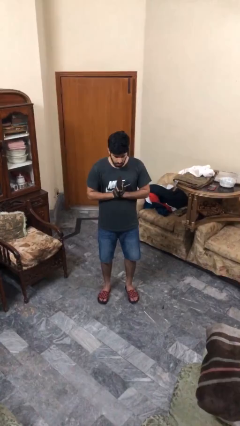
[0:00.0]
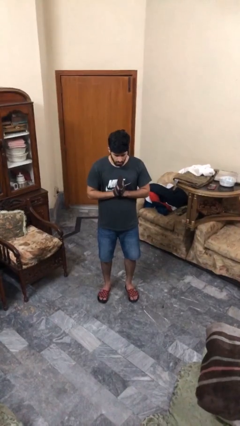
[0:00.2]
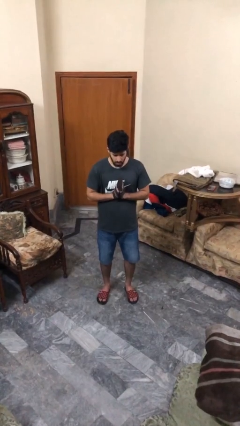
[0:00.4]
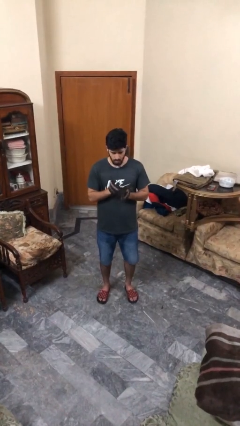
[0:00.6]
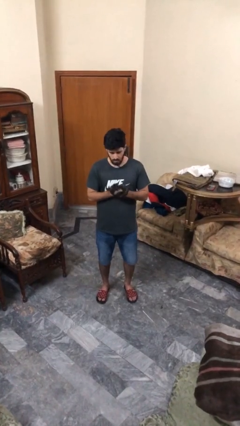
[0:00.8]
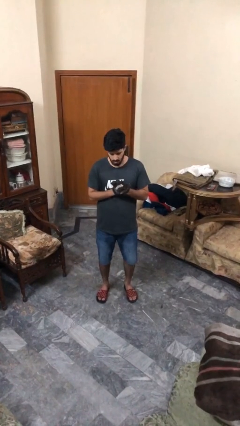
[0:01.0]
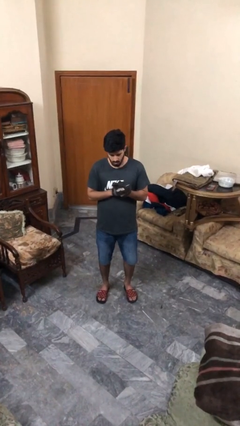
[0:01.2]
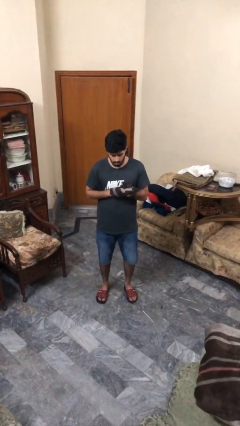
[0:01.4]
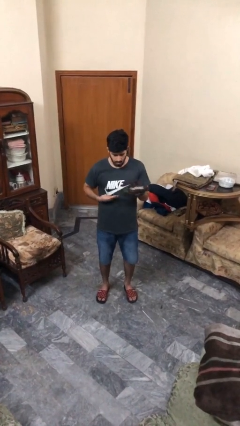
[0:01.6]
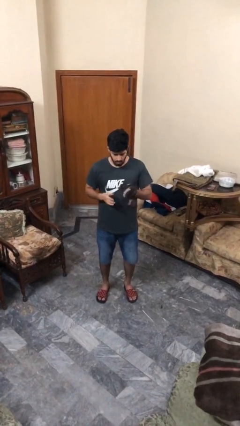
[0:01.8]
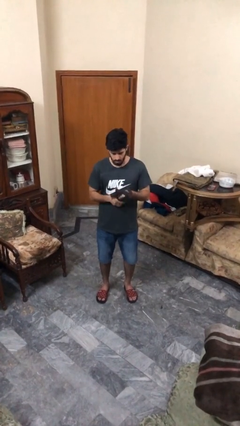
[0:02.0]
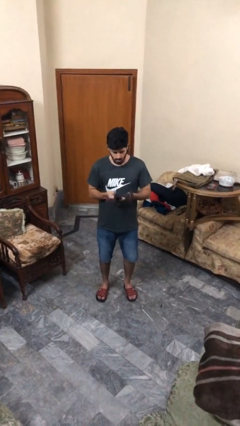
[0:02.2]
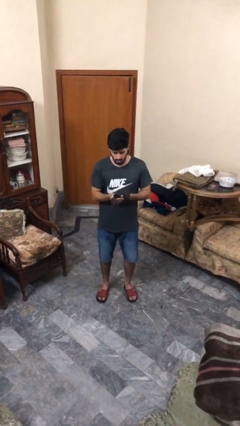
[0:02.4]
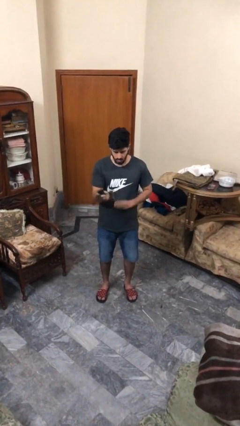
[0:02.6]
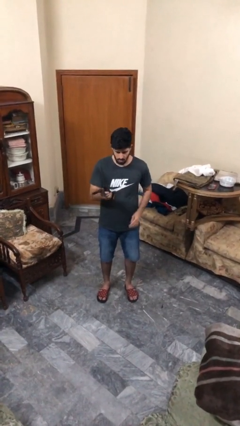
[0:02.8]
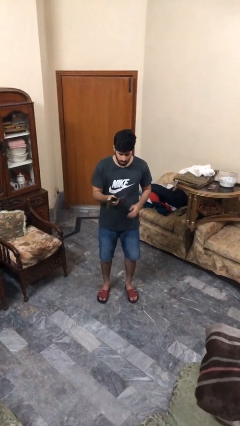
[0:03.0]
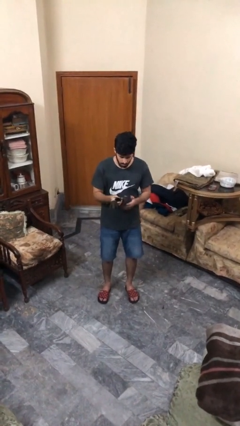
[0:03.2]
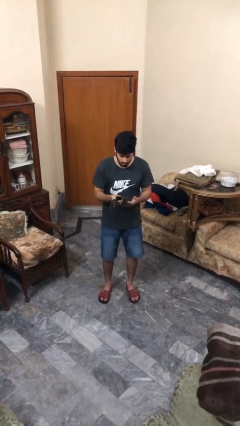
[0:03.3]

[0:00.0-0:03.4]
person takes off gloves

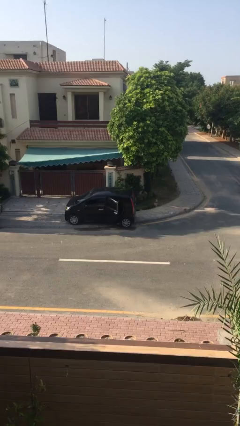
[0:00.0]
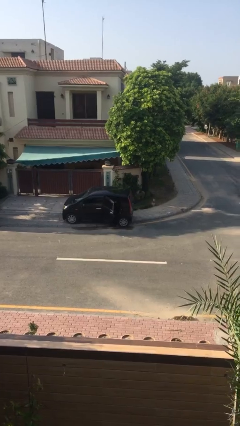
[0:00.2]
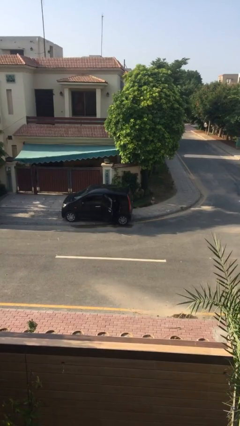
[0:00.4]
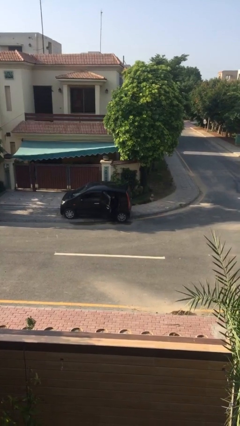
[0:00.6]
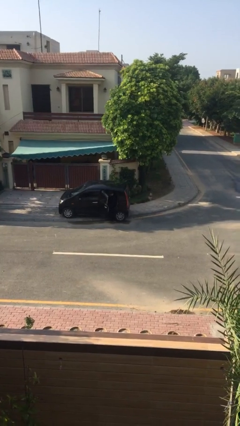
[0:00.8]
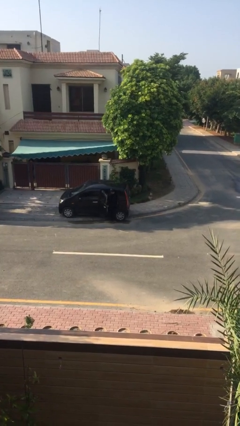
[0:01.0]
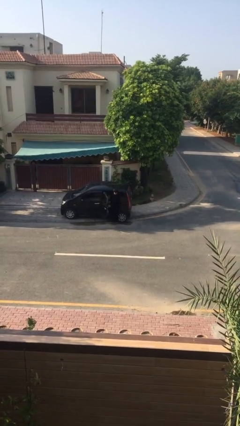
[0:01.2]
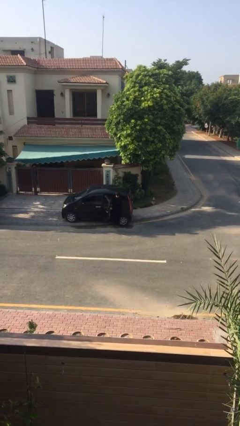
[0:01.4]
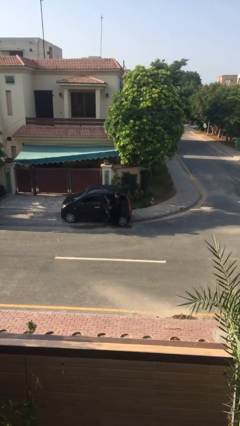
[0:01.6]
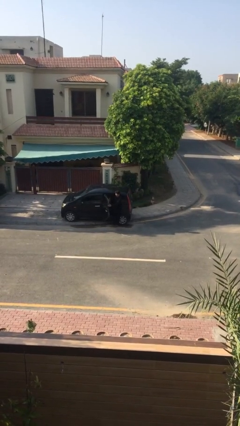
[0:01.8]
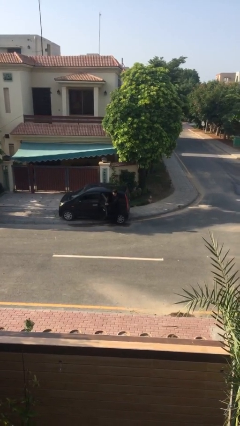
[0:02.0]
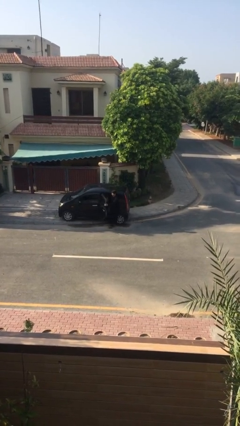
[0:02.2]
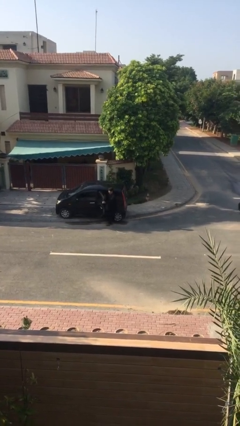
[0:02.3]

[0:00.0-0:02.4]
person exits car

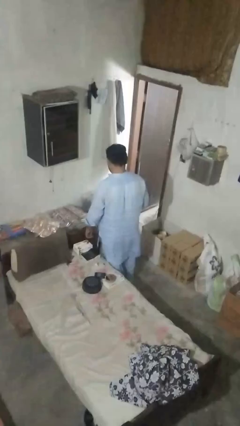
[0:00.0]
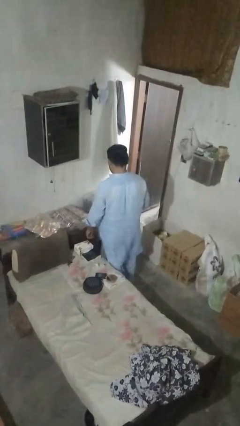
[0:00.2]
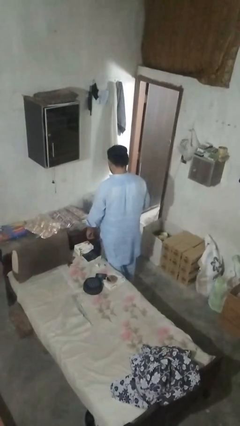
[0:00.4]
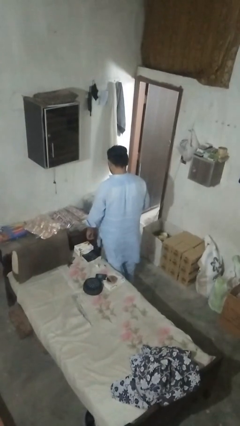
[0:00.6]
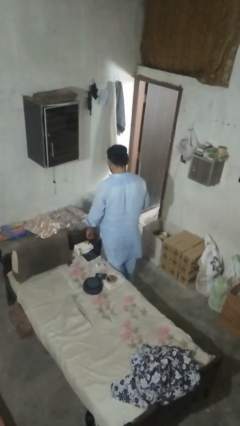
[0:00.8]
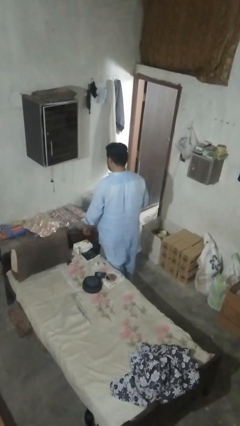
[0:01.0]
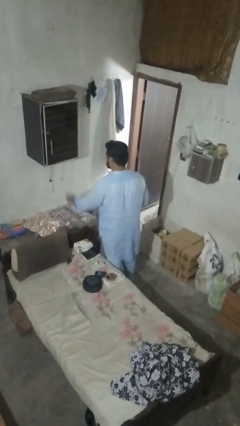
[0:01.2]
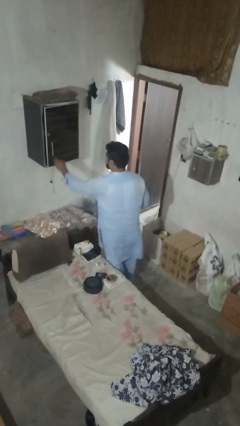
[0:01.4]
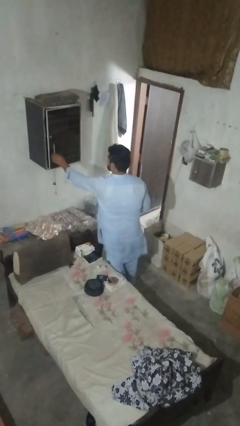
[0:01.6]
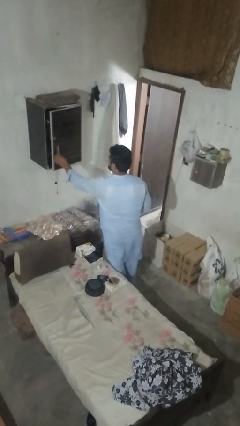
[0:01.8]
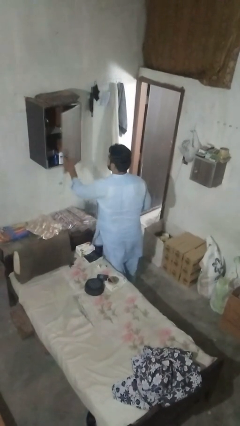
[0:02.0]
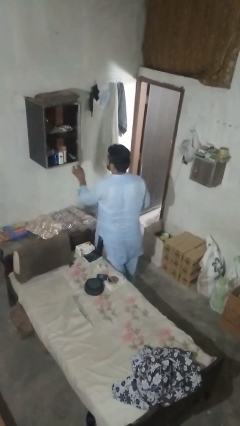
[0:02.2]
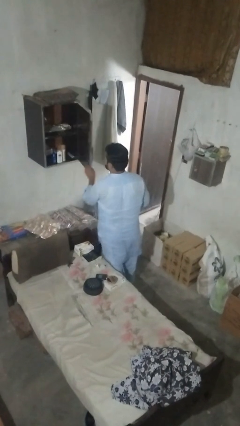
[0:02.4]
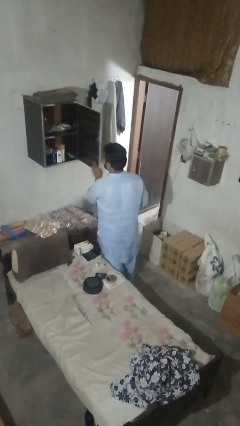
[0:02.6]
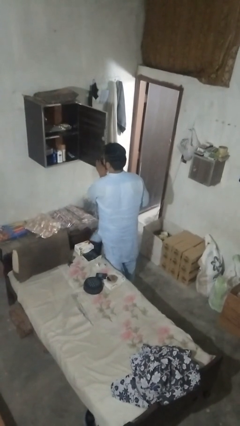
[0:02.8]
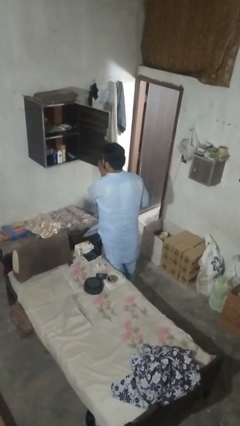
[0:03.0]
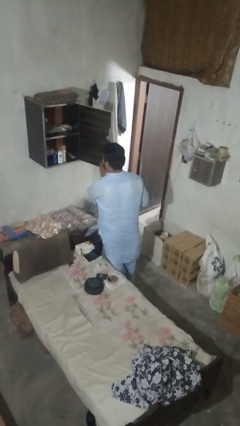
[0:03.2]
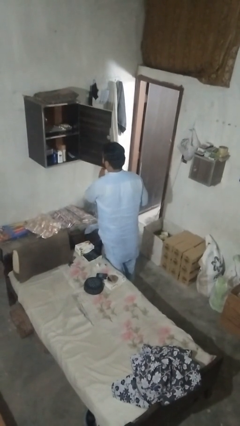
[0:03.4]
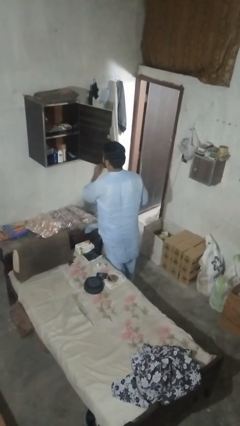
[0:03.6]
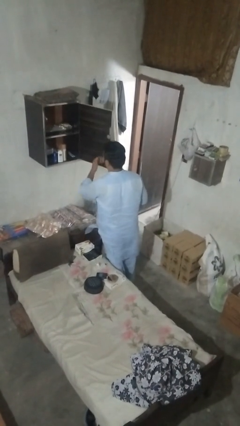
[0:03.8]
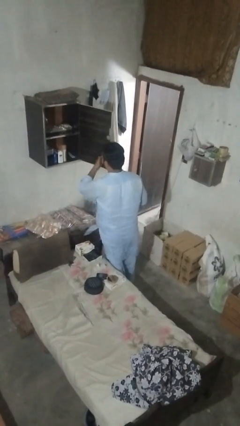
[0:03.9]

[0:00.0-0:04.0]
person opens dresser drawer

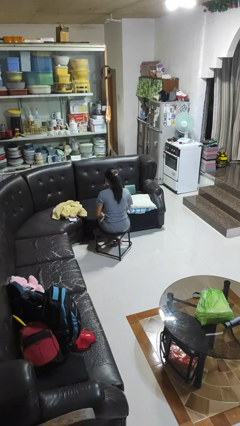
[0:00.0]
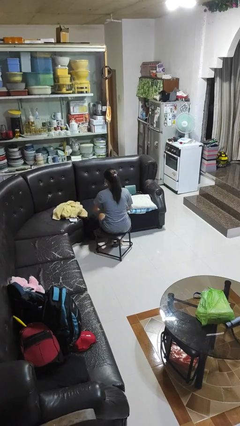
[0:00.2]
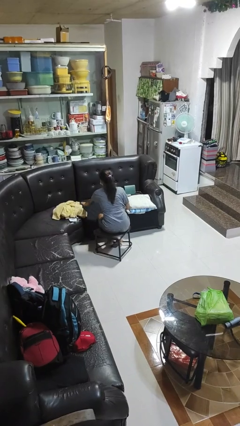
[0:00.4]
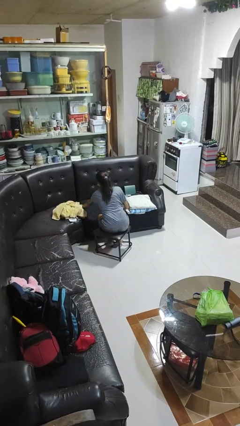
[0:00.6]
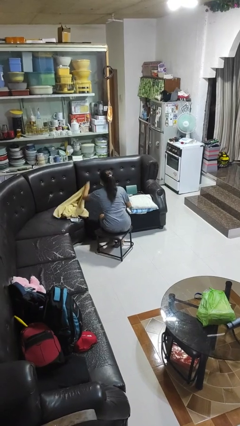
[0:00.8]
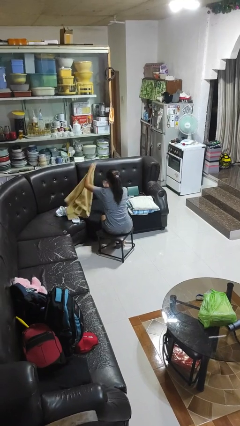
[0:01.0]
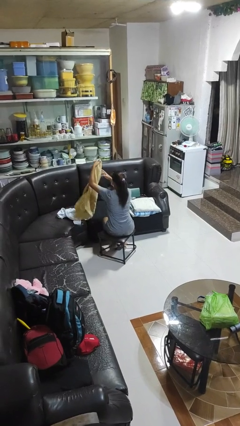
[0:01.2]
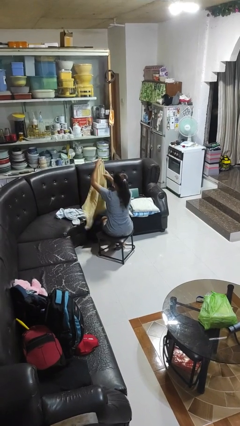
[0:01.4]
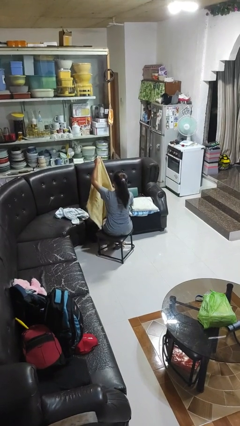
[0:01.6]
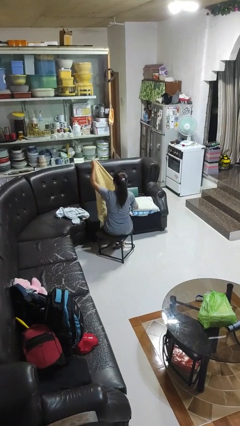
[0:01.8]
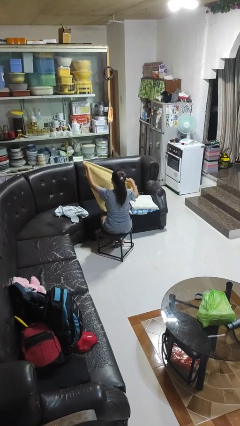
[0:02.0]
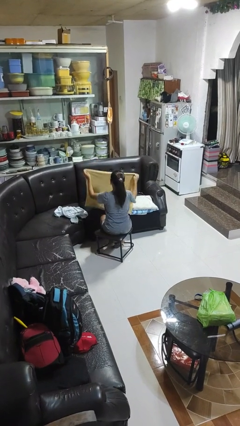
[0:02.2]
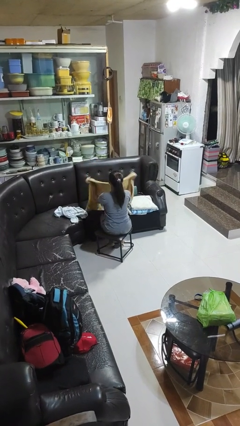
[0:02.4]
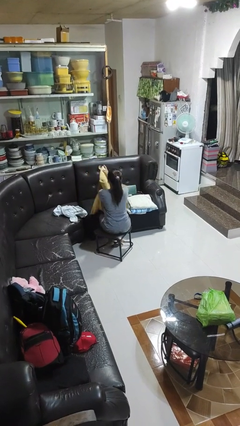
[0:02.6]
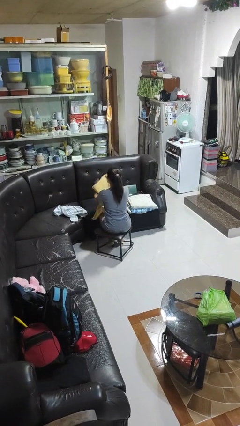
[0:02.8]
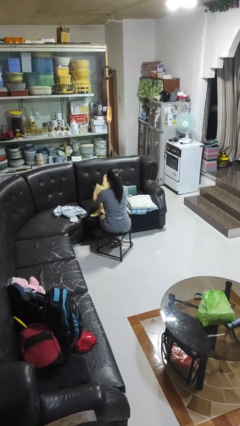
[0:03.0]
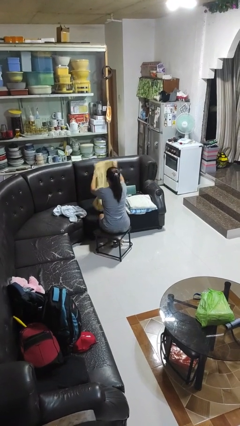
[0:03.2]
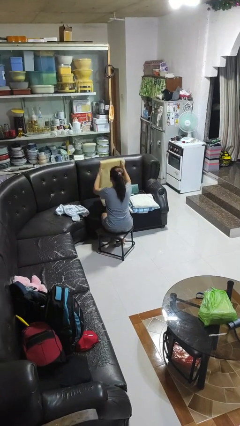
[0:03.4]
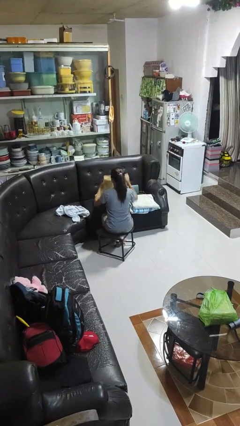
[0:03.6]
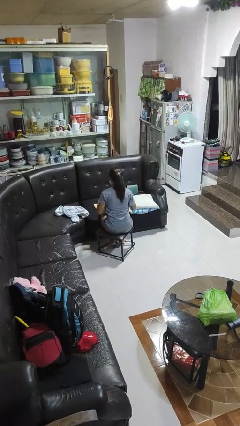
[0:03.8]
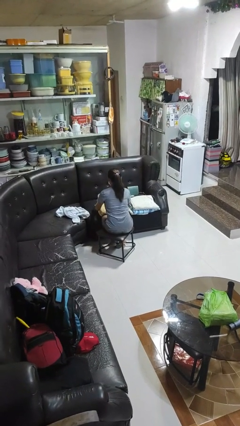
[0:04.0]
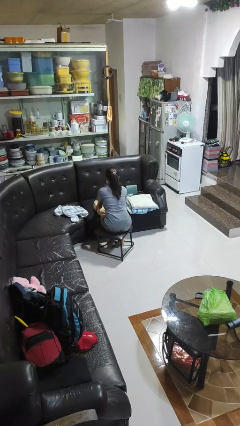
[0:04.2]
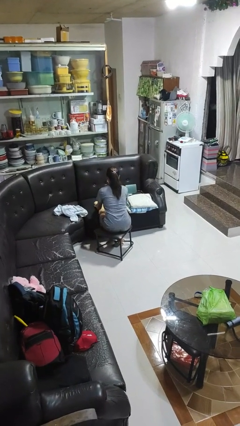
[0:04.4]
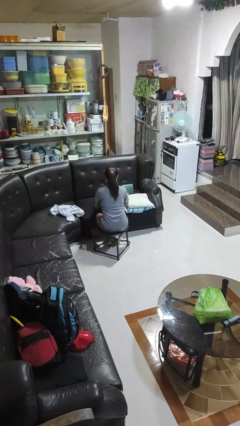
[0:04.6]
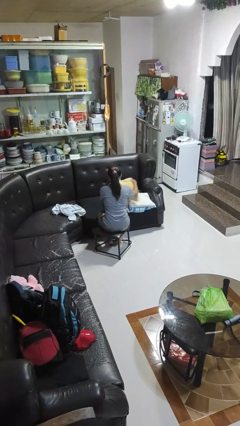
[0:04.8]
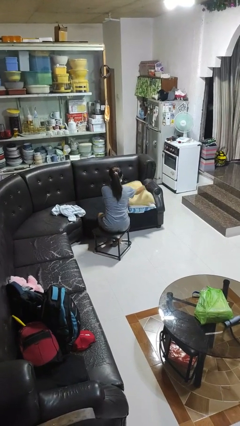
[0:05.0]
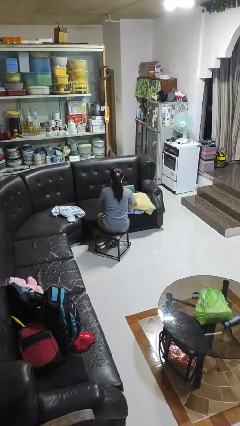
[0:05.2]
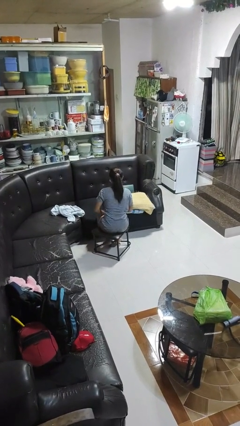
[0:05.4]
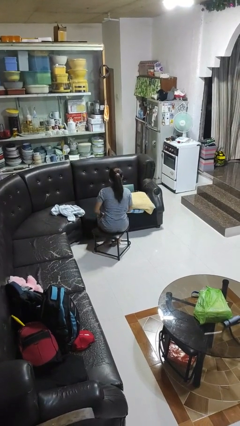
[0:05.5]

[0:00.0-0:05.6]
person folds towel

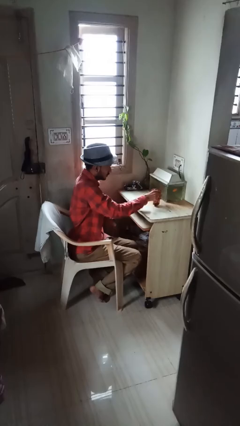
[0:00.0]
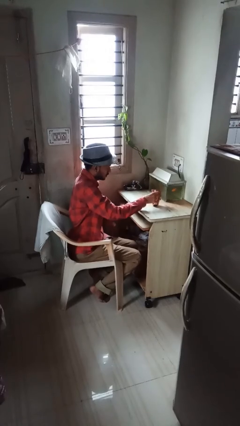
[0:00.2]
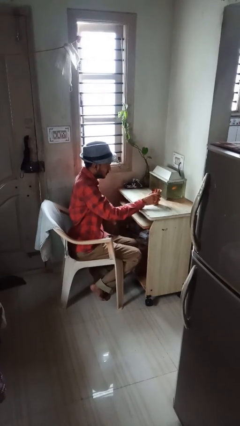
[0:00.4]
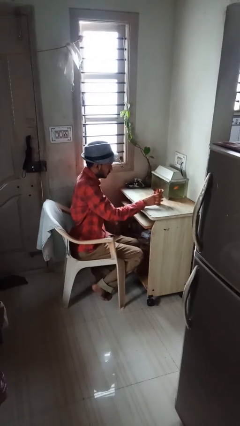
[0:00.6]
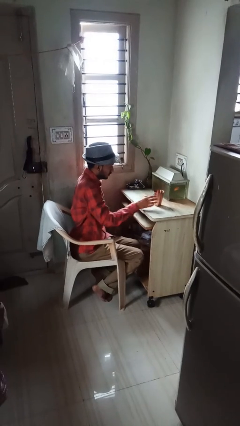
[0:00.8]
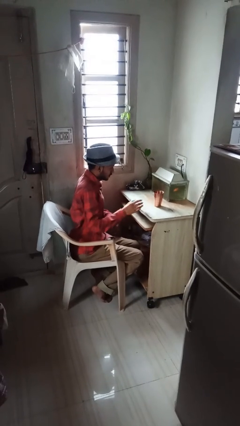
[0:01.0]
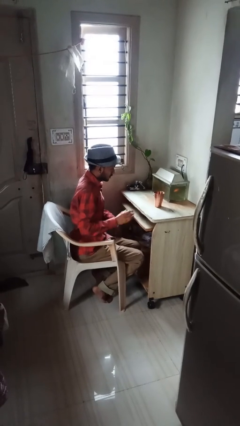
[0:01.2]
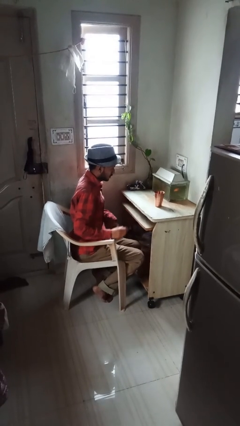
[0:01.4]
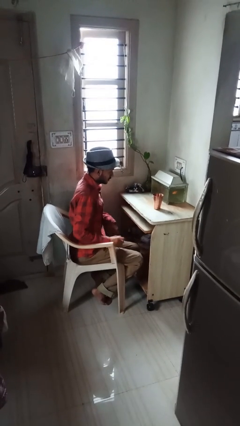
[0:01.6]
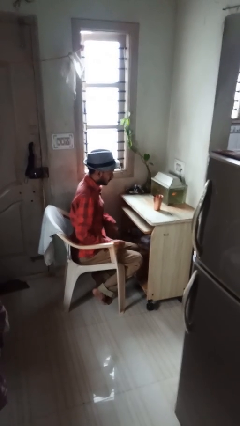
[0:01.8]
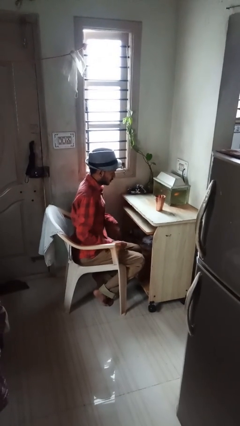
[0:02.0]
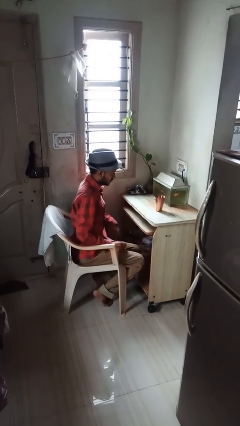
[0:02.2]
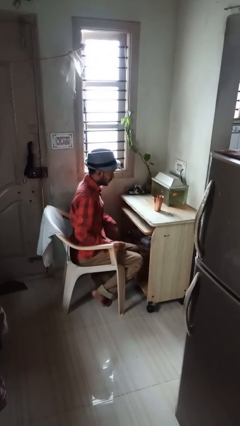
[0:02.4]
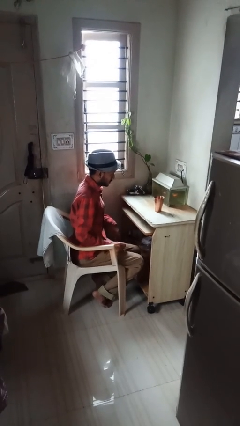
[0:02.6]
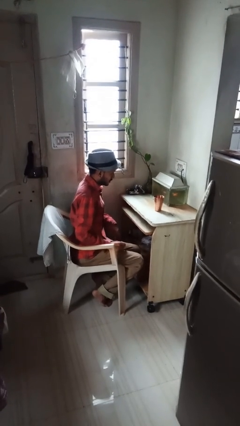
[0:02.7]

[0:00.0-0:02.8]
person sets upright glass
